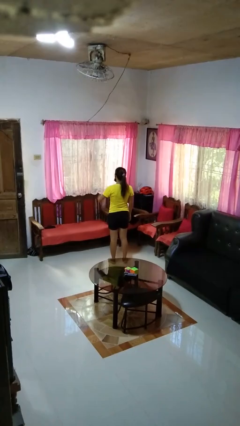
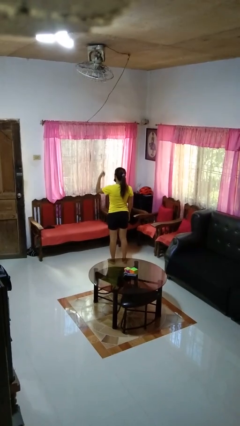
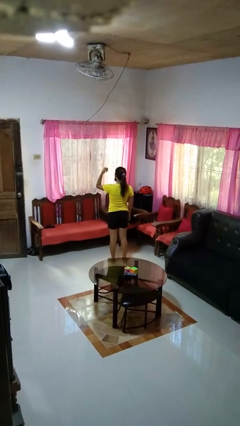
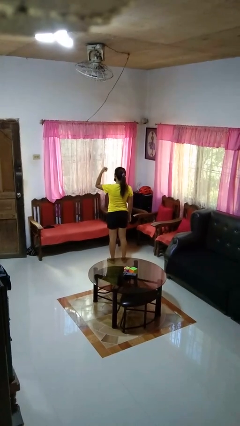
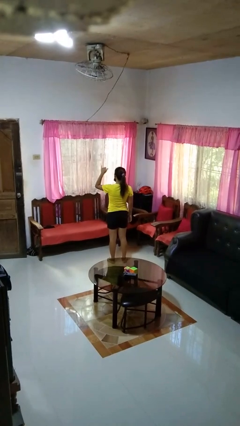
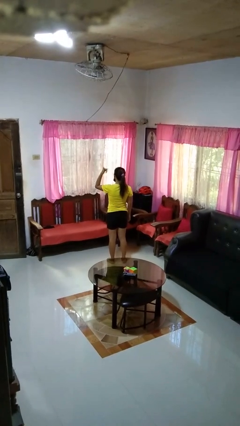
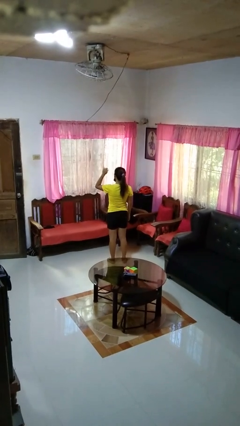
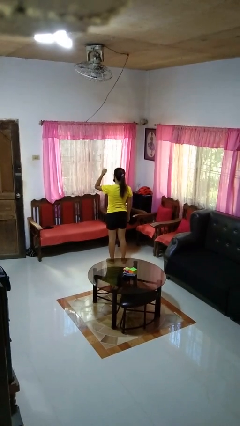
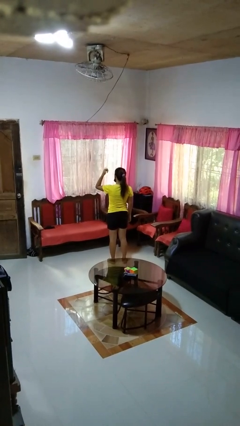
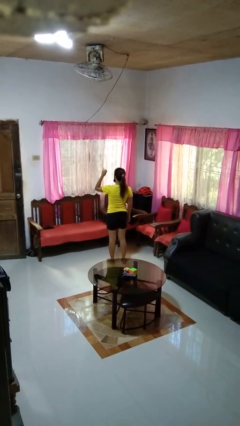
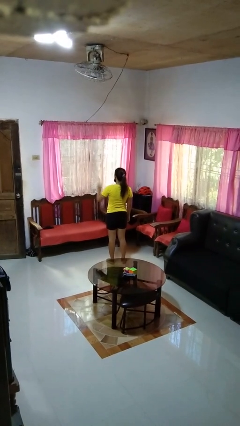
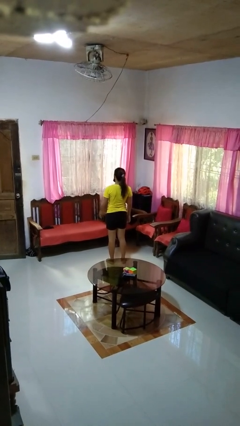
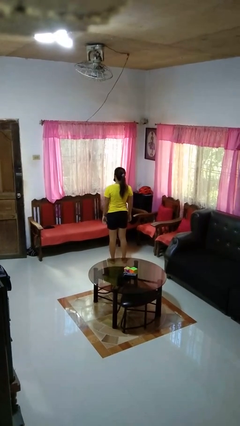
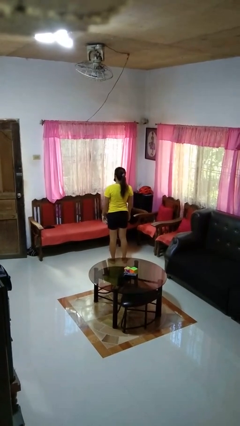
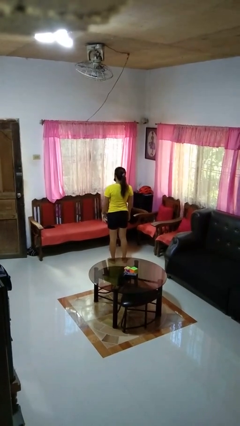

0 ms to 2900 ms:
person gestures hang loose

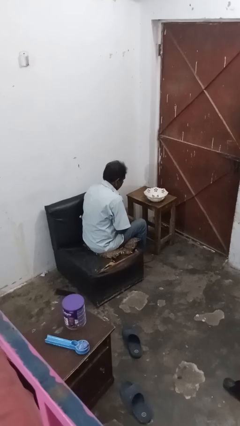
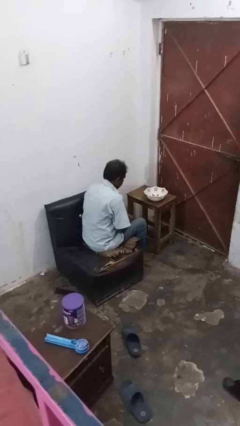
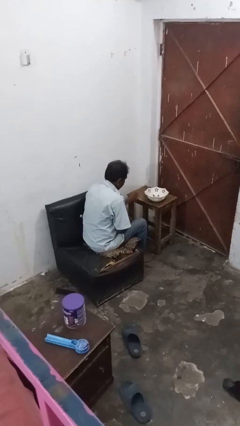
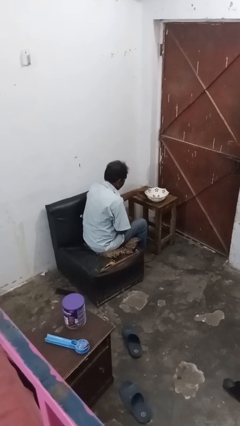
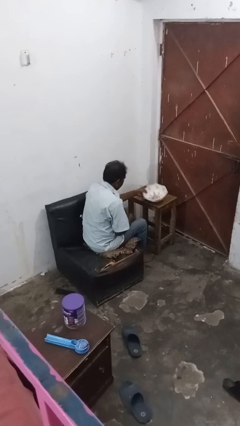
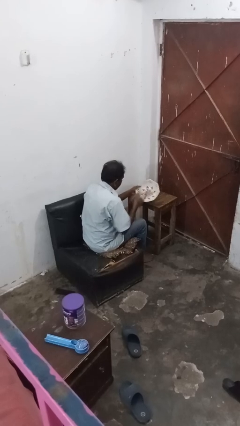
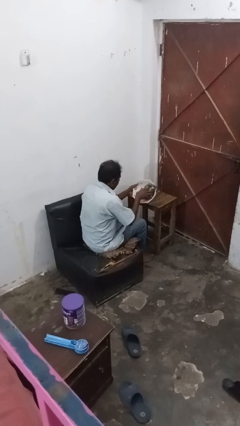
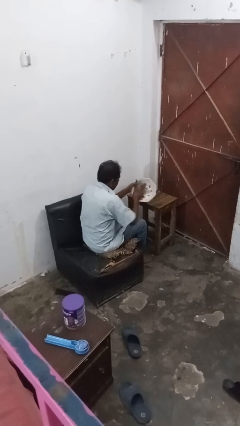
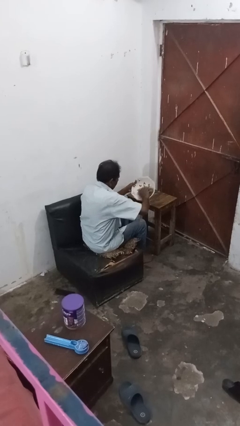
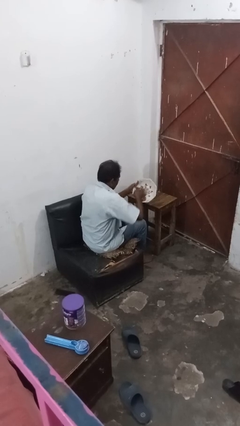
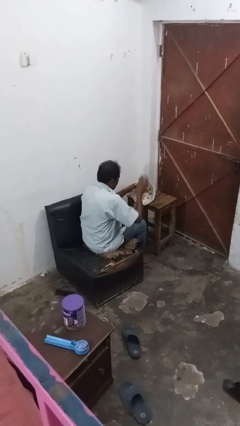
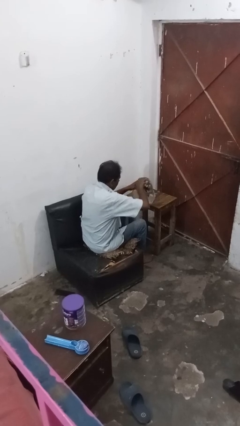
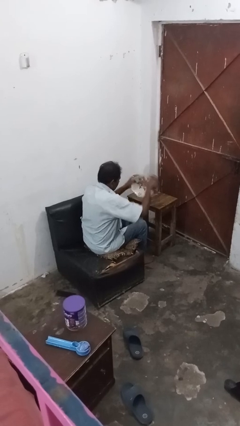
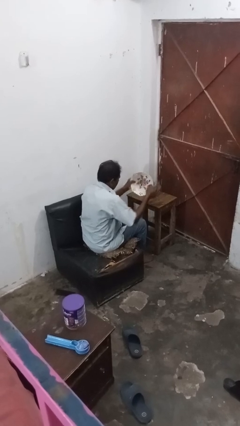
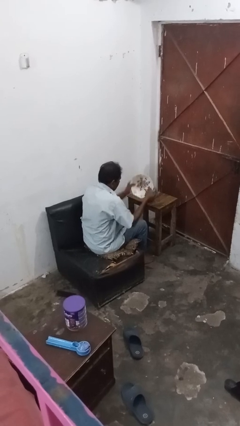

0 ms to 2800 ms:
person dries dish

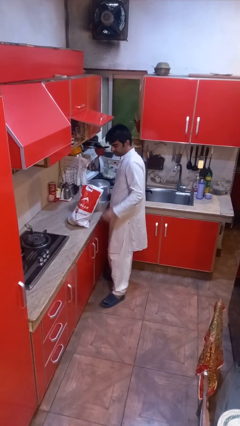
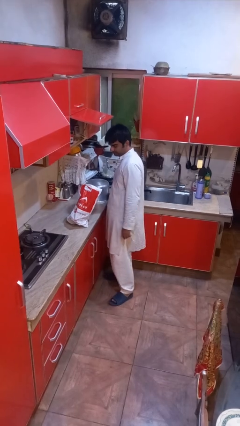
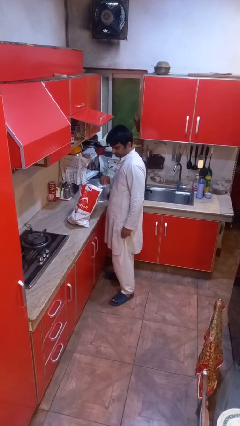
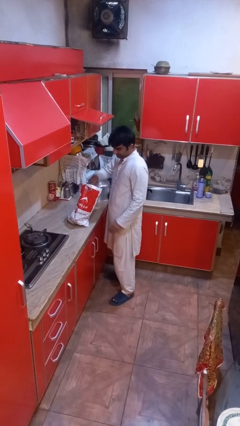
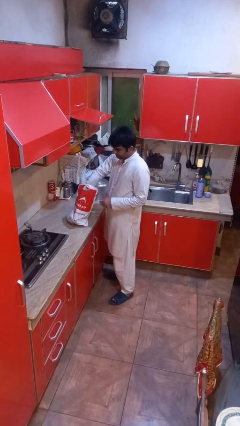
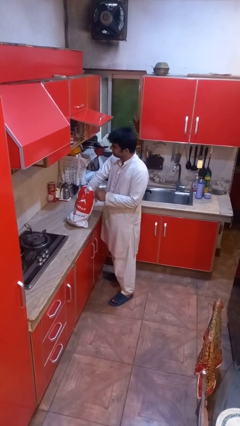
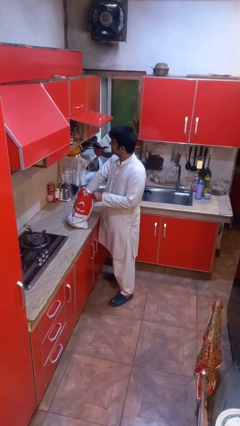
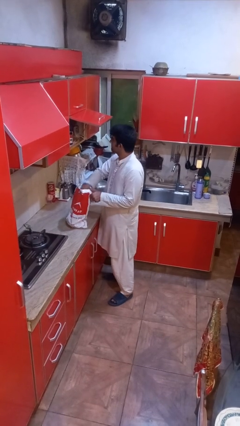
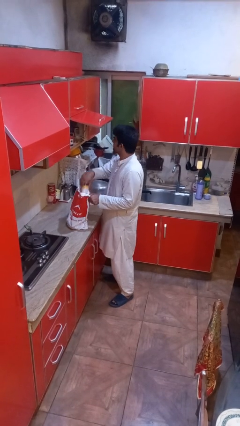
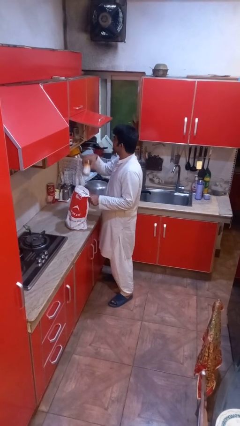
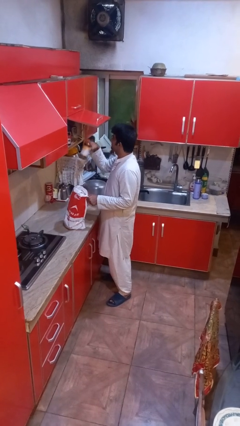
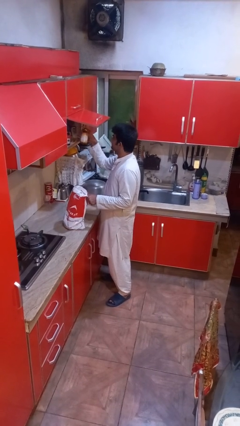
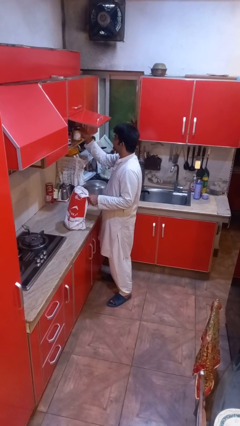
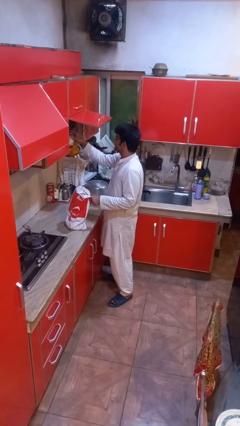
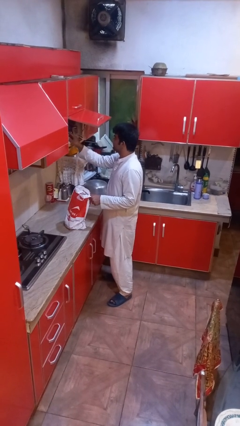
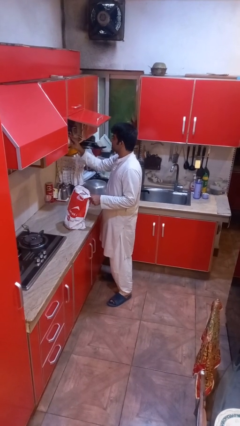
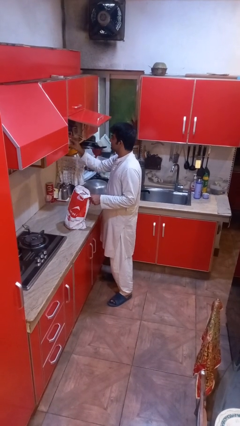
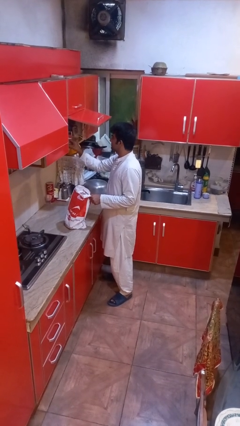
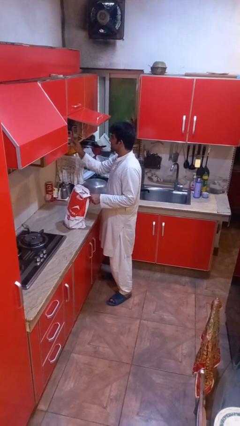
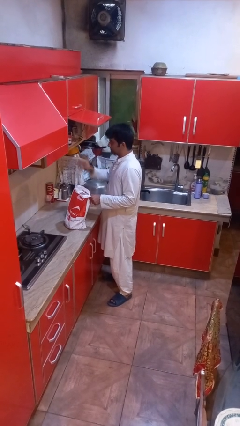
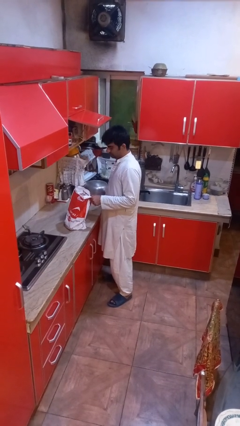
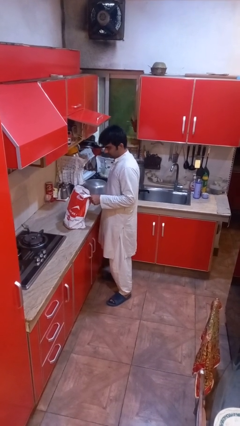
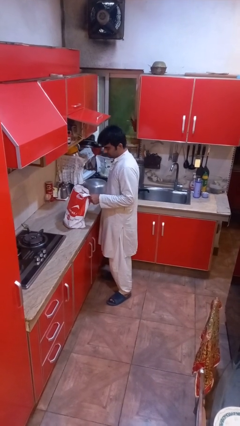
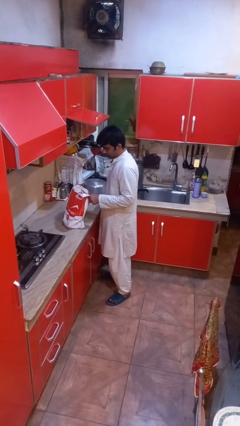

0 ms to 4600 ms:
person loads groceries into cabinet

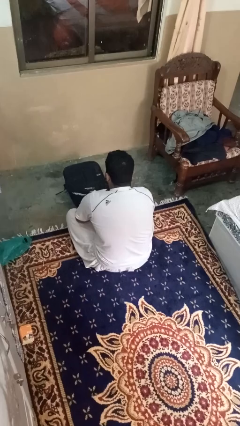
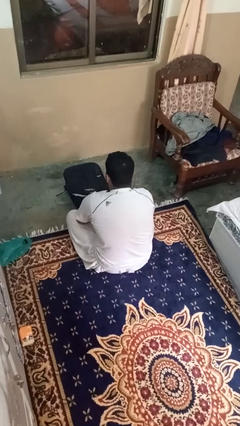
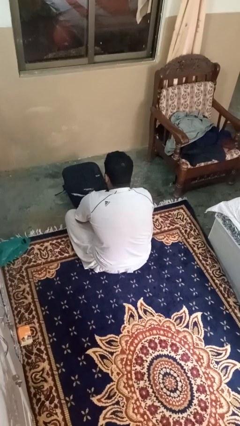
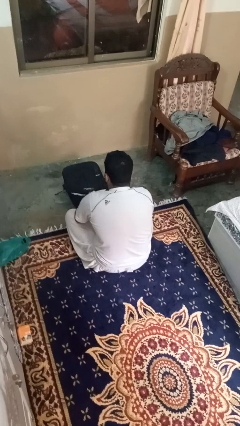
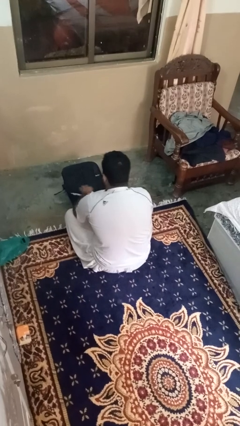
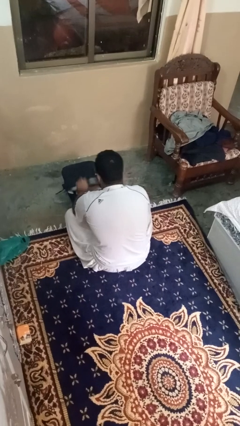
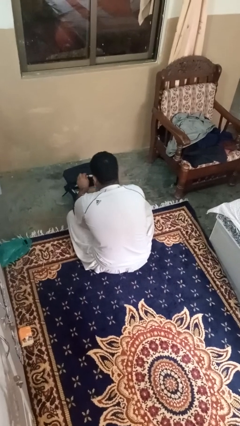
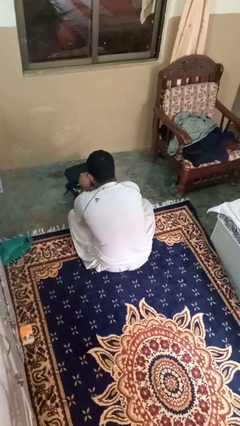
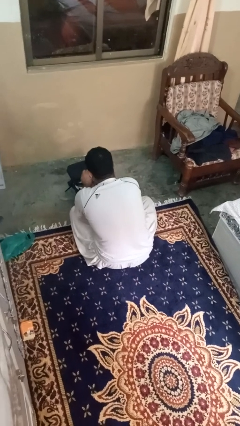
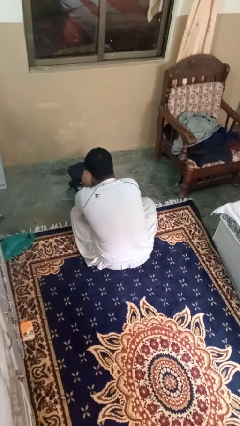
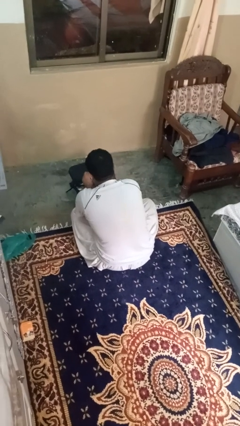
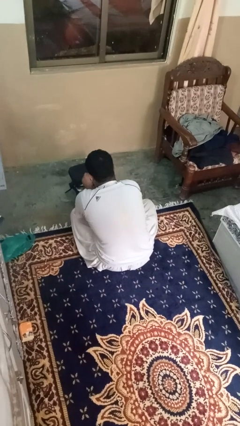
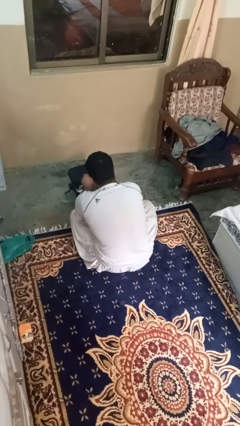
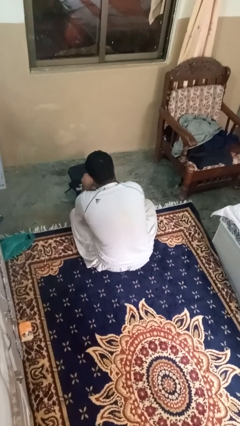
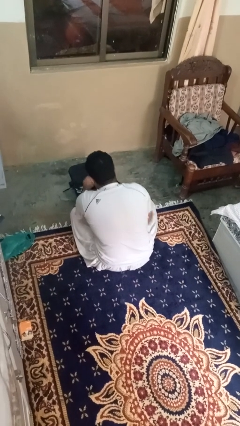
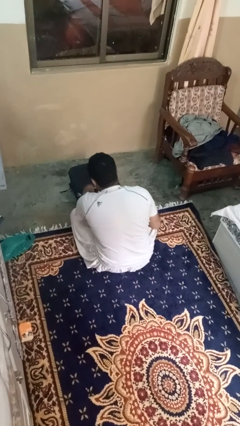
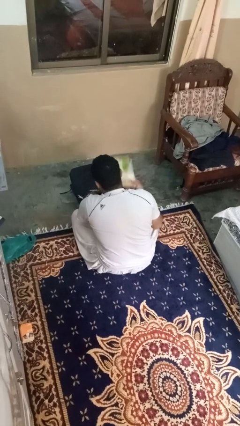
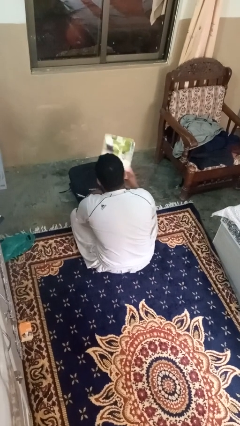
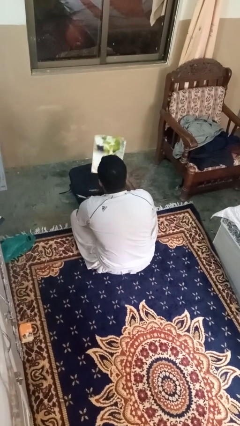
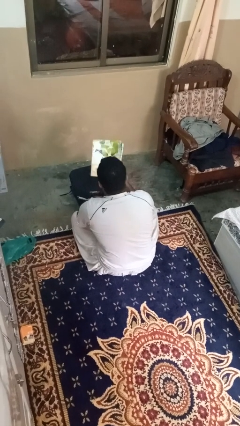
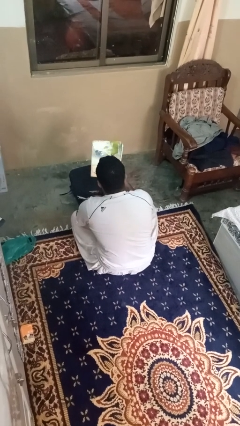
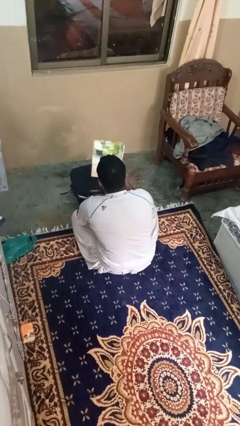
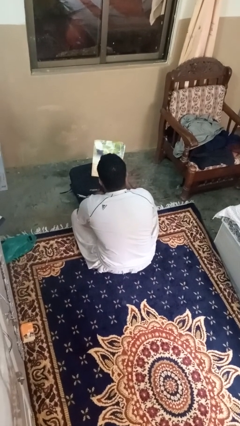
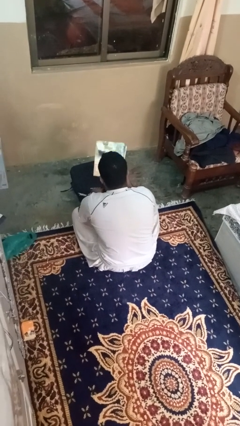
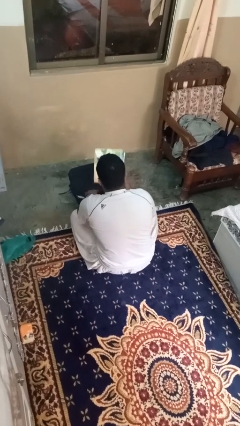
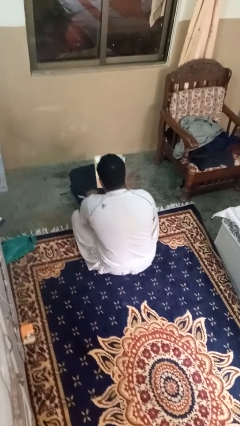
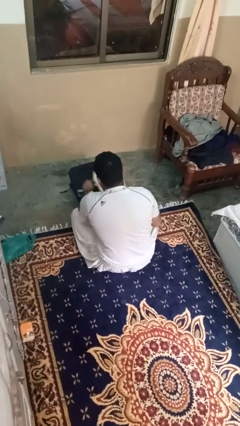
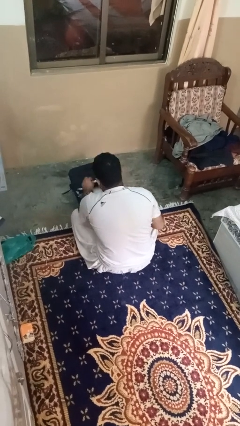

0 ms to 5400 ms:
person takes object from bag

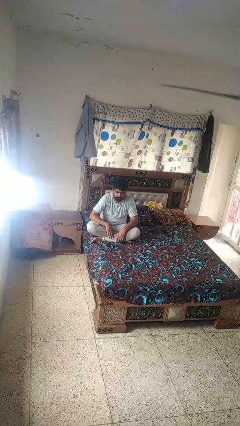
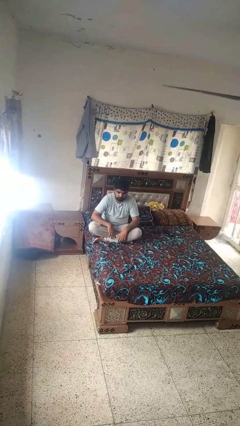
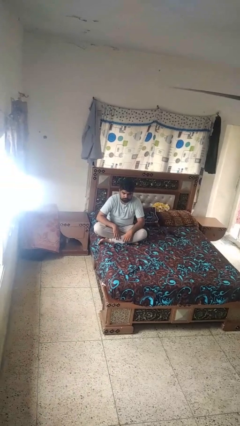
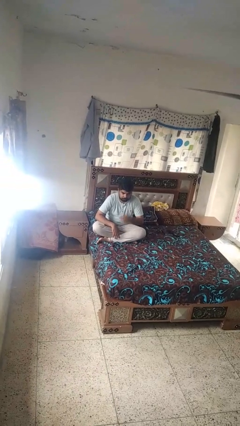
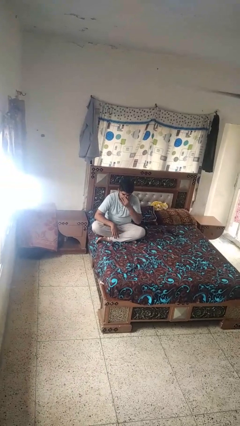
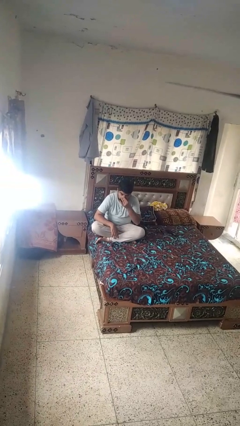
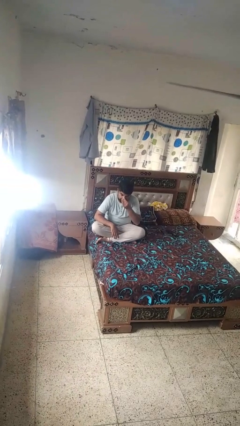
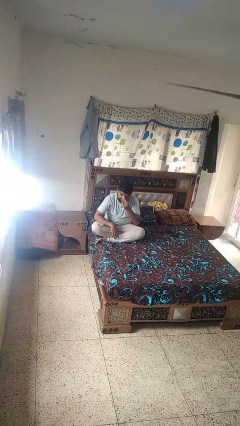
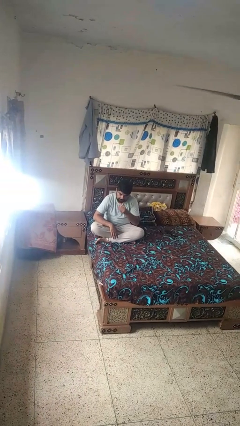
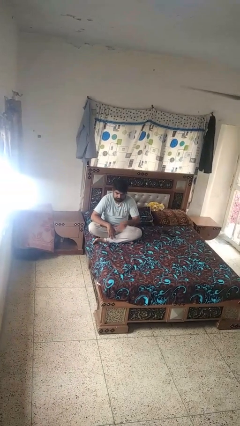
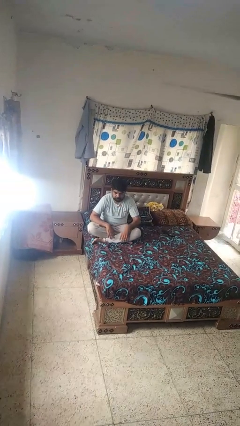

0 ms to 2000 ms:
person scratches face
